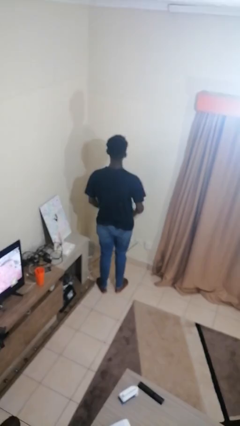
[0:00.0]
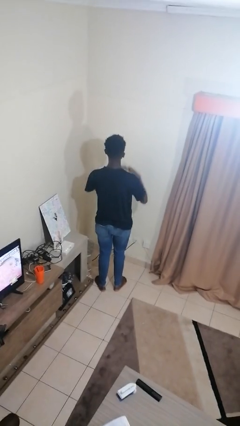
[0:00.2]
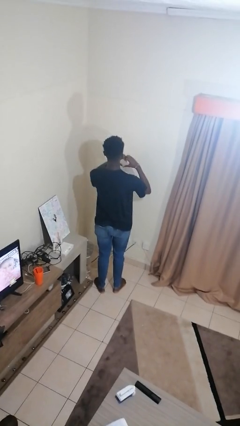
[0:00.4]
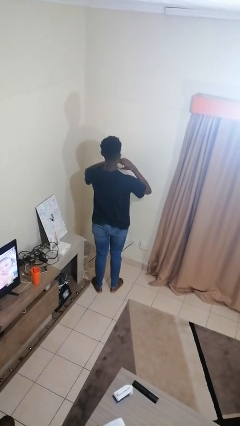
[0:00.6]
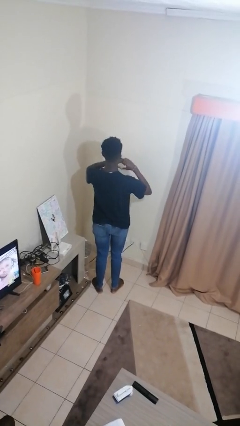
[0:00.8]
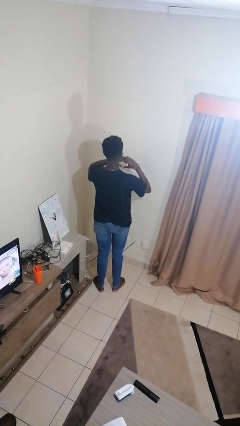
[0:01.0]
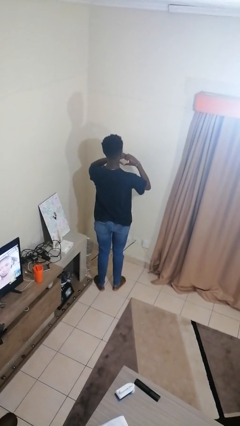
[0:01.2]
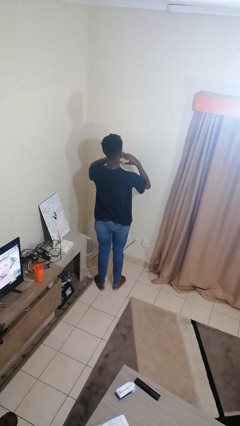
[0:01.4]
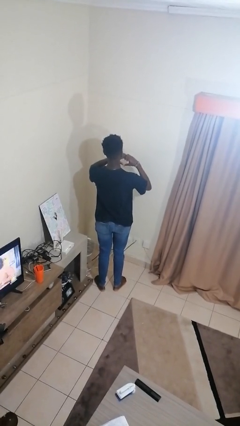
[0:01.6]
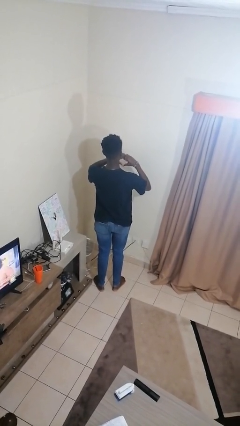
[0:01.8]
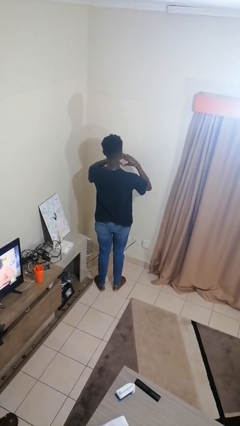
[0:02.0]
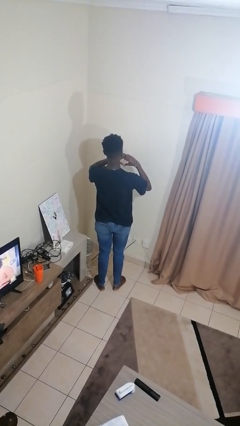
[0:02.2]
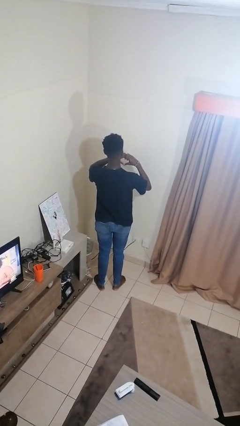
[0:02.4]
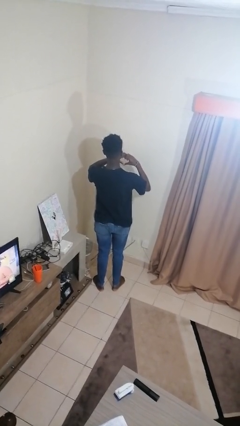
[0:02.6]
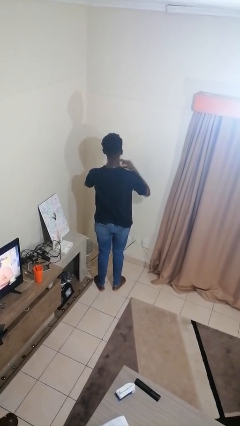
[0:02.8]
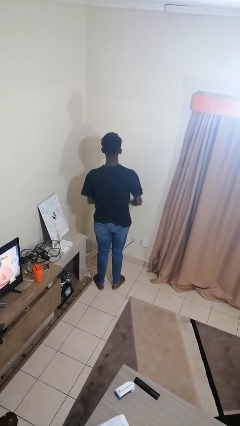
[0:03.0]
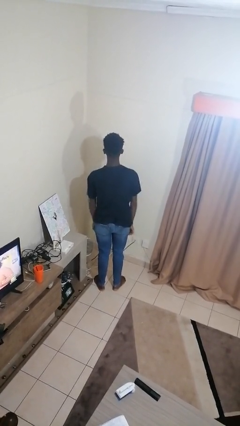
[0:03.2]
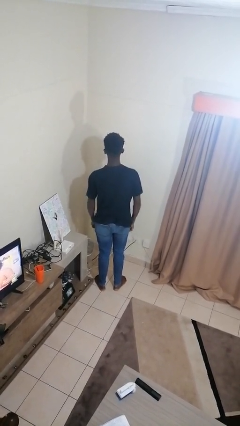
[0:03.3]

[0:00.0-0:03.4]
person gestures heart

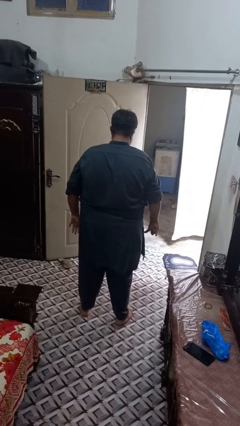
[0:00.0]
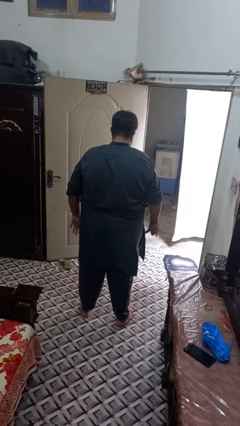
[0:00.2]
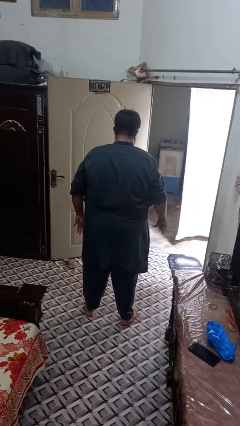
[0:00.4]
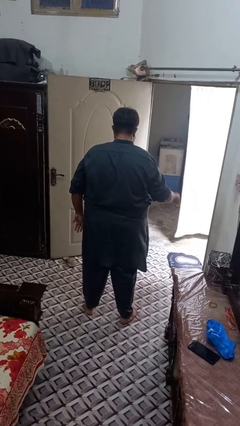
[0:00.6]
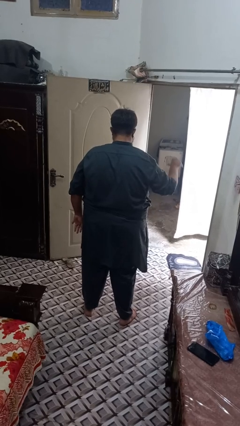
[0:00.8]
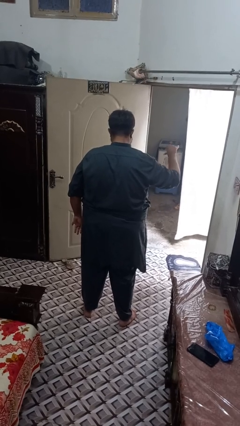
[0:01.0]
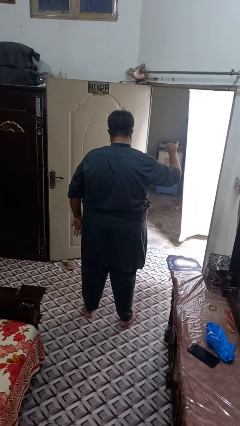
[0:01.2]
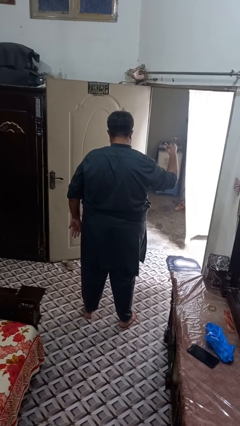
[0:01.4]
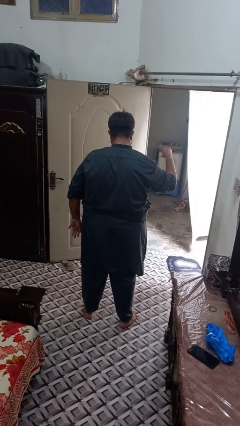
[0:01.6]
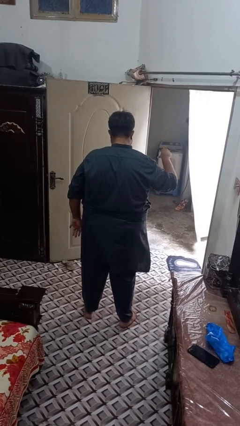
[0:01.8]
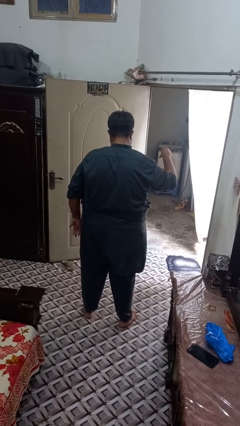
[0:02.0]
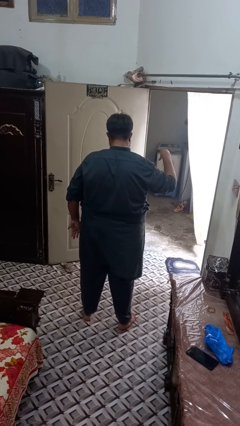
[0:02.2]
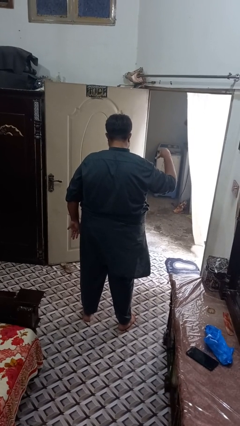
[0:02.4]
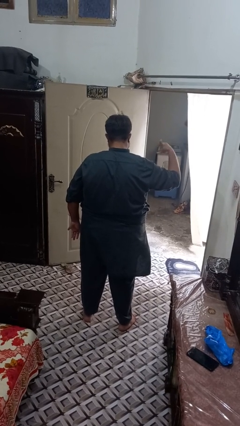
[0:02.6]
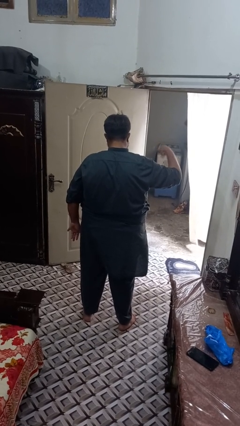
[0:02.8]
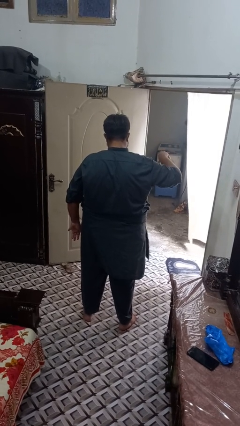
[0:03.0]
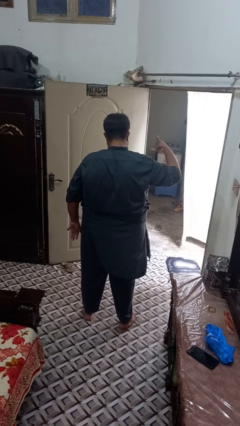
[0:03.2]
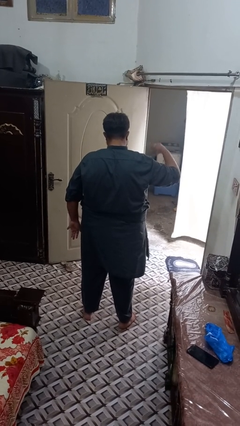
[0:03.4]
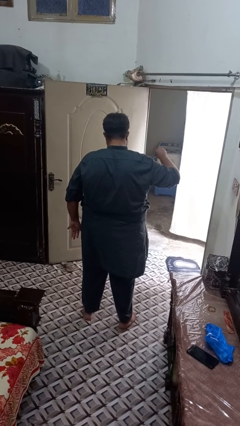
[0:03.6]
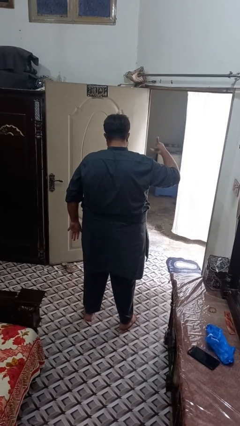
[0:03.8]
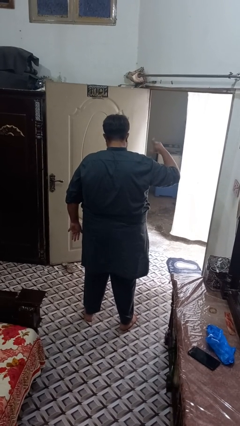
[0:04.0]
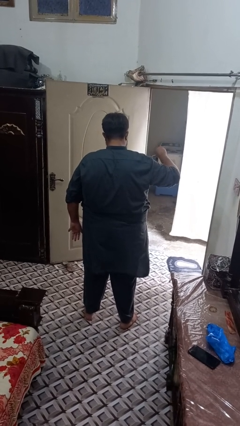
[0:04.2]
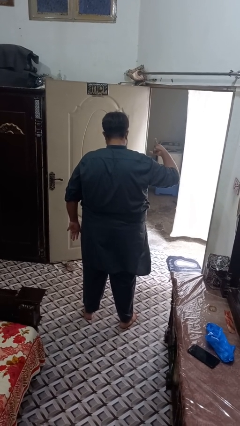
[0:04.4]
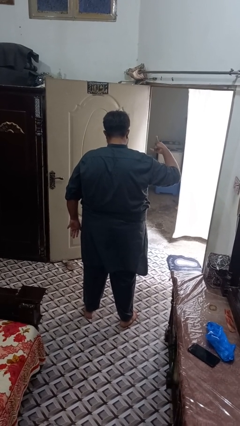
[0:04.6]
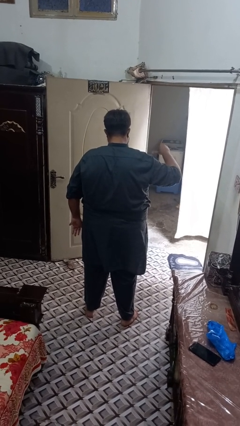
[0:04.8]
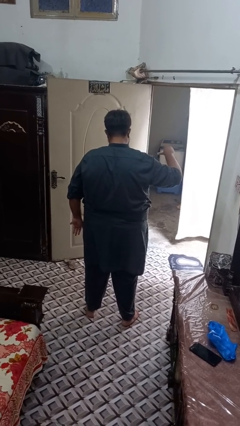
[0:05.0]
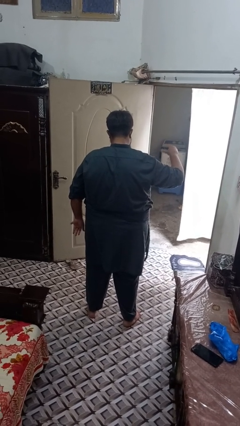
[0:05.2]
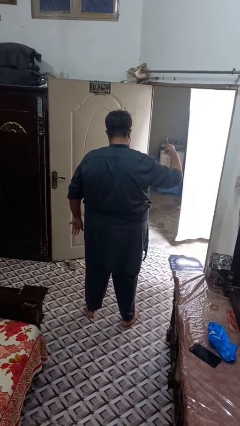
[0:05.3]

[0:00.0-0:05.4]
person gestures hang loose

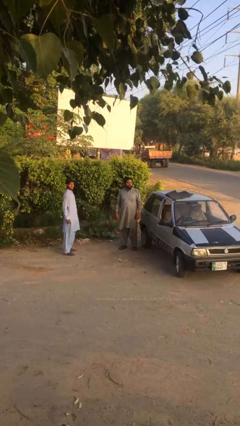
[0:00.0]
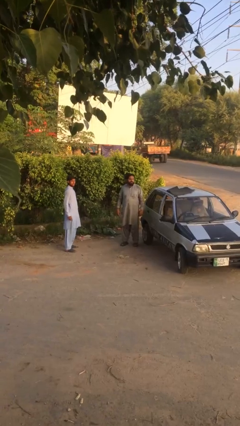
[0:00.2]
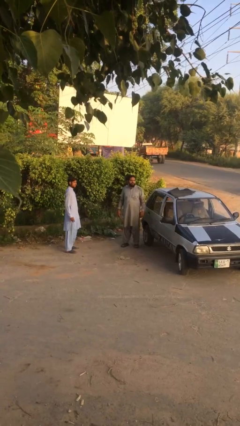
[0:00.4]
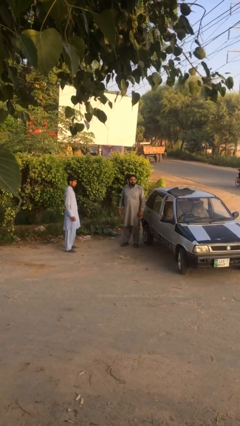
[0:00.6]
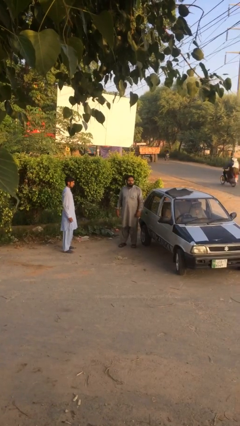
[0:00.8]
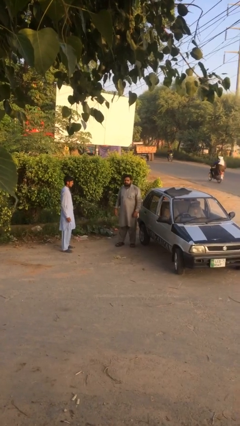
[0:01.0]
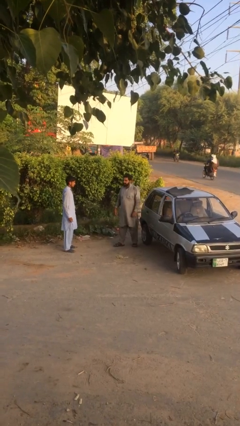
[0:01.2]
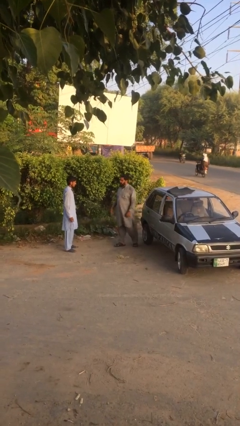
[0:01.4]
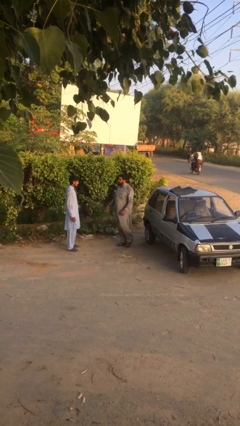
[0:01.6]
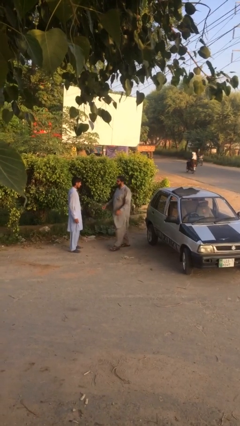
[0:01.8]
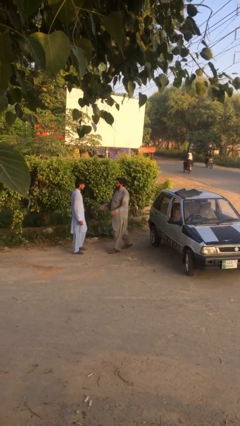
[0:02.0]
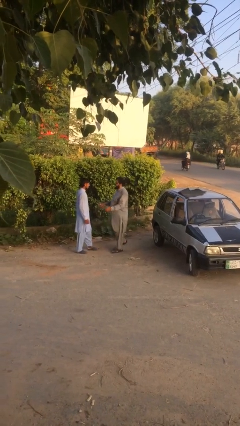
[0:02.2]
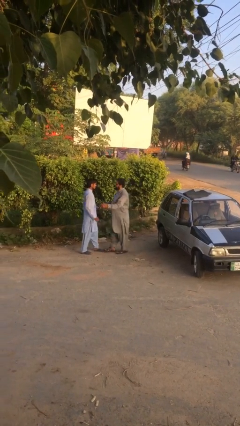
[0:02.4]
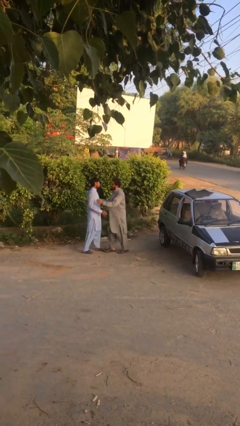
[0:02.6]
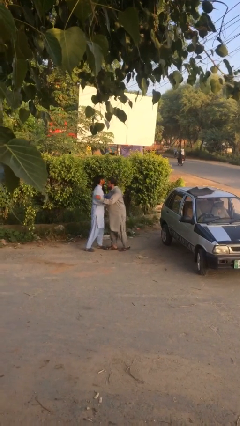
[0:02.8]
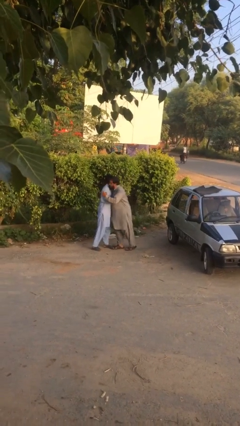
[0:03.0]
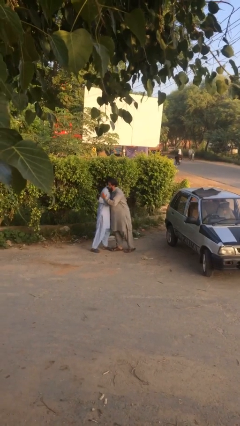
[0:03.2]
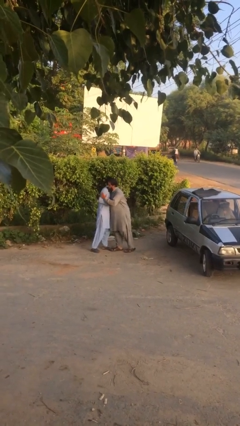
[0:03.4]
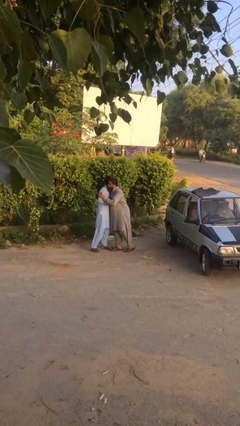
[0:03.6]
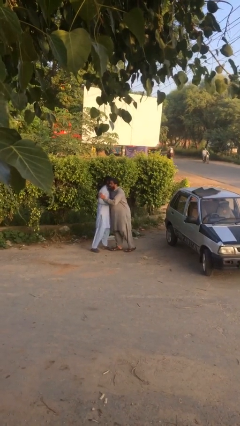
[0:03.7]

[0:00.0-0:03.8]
person embraces person

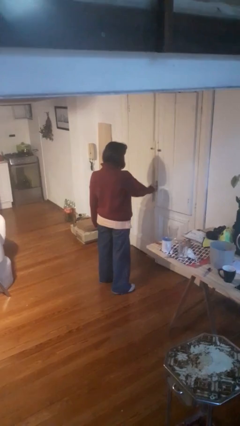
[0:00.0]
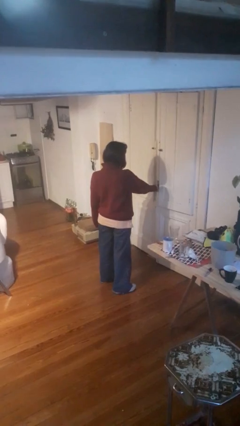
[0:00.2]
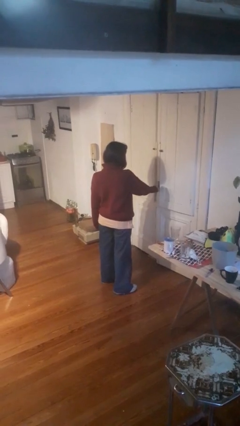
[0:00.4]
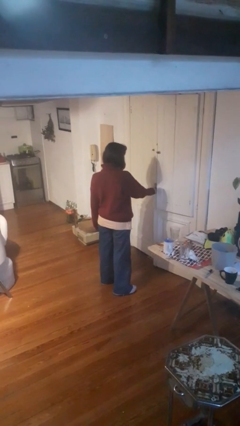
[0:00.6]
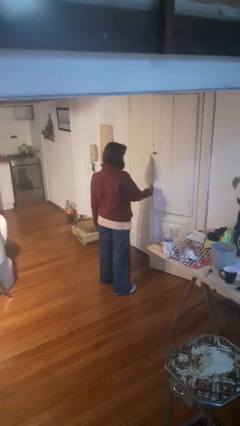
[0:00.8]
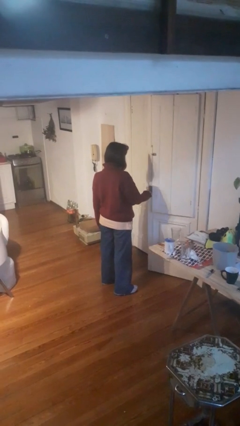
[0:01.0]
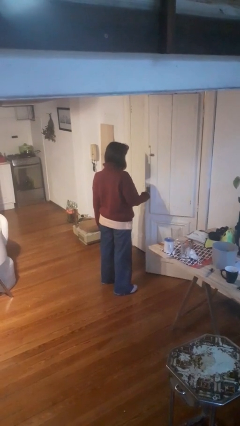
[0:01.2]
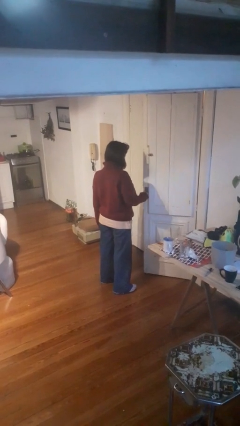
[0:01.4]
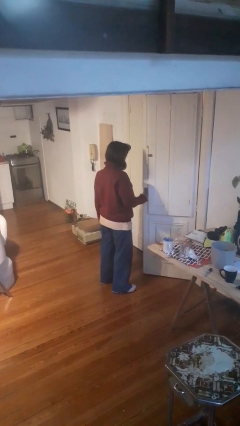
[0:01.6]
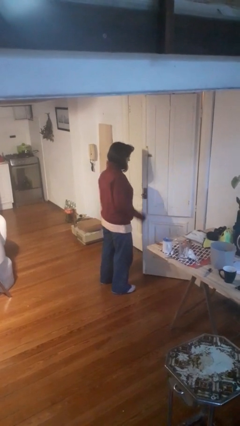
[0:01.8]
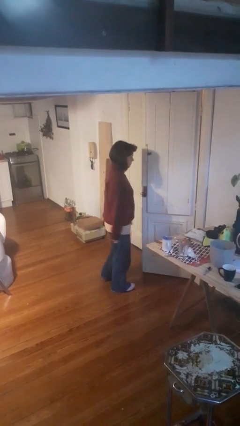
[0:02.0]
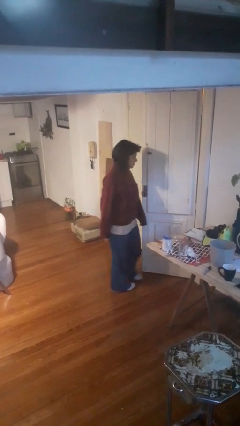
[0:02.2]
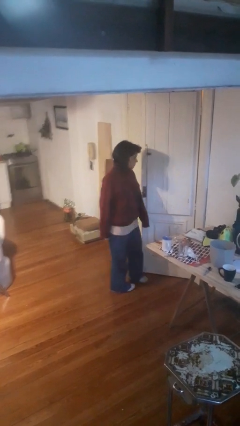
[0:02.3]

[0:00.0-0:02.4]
person opens facility door

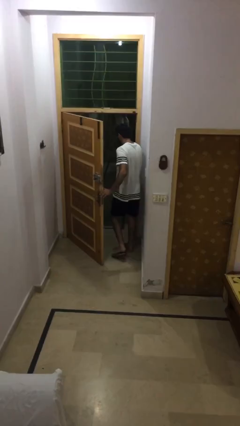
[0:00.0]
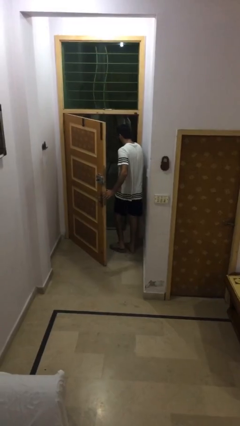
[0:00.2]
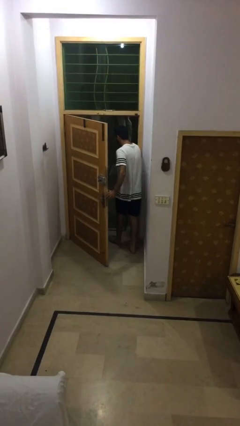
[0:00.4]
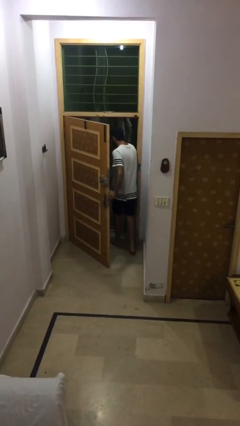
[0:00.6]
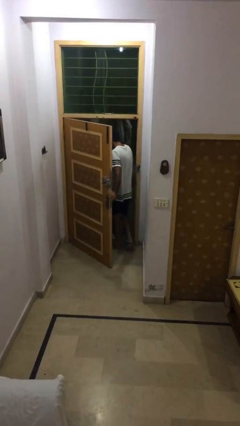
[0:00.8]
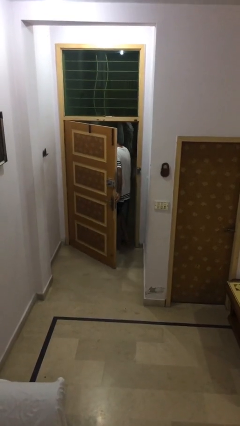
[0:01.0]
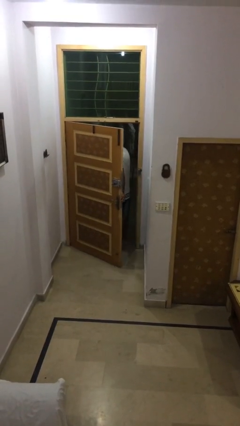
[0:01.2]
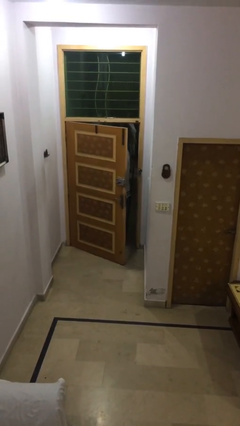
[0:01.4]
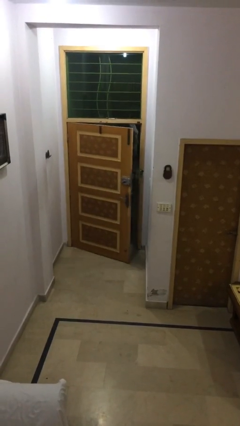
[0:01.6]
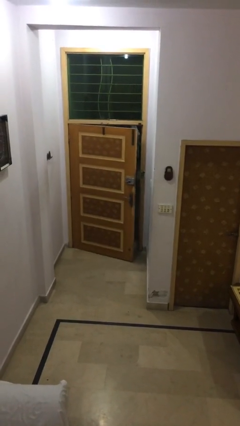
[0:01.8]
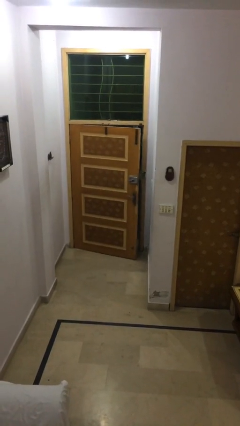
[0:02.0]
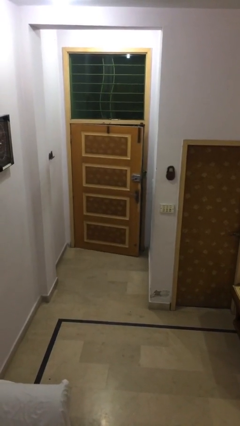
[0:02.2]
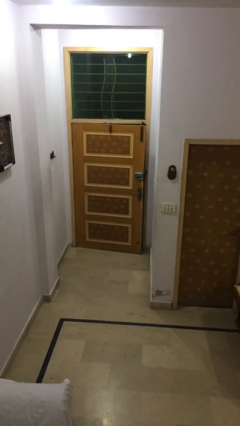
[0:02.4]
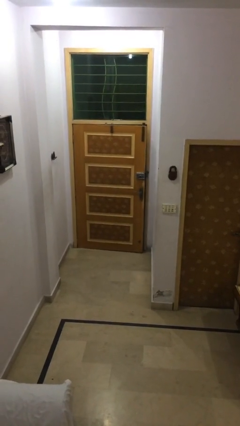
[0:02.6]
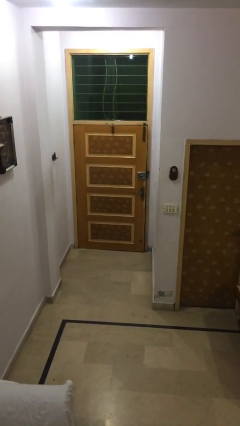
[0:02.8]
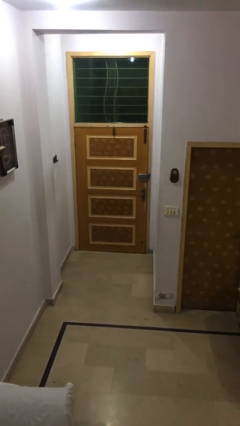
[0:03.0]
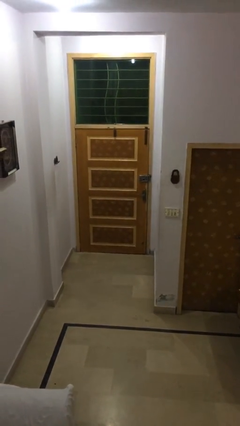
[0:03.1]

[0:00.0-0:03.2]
person closes facility door
